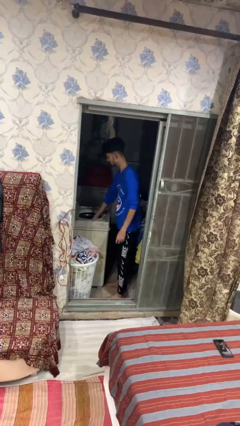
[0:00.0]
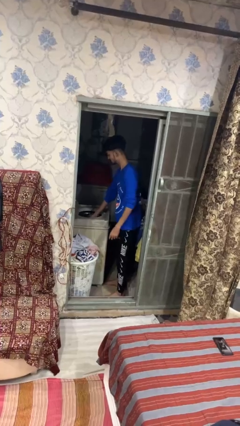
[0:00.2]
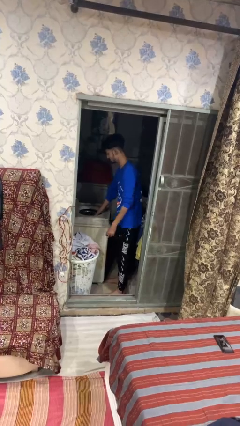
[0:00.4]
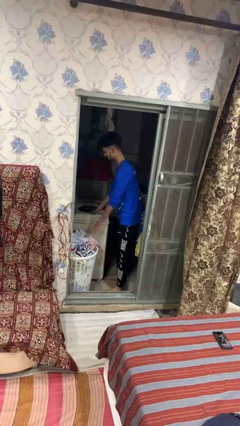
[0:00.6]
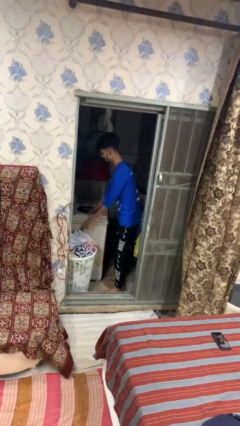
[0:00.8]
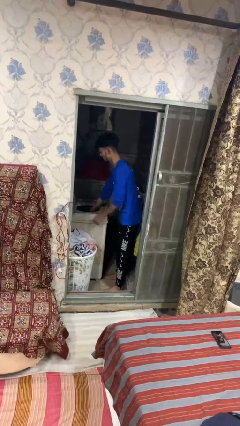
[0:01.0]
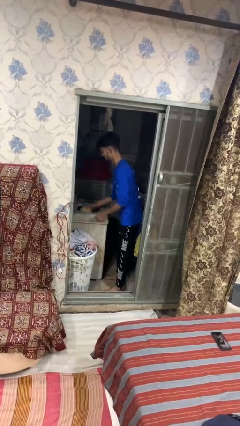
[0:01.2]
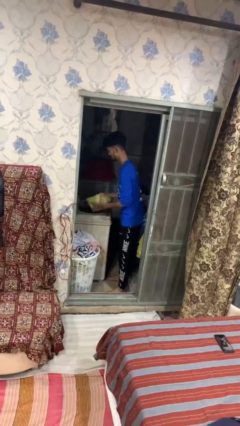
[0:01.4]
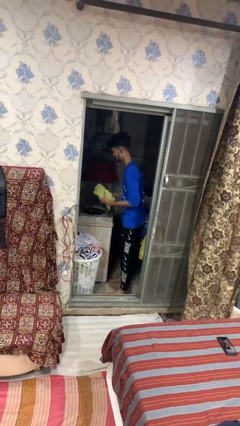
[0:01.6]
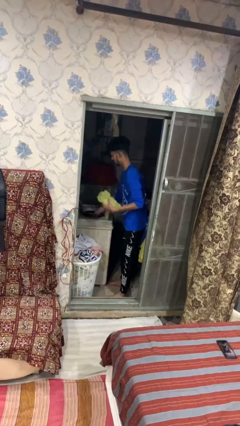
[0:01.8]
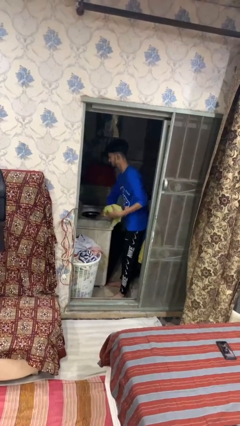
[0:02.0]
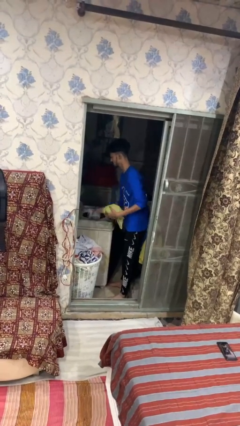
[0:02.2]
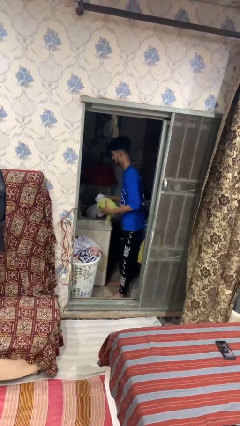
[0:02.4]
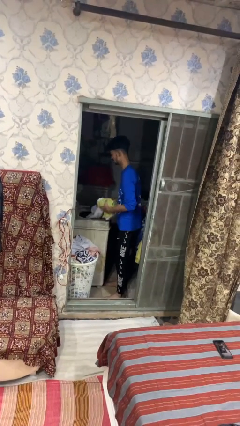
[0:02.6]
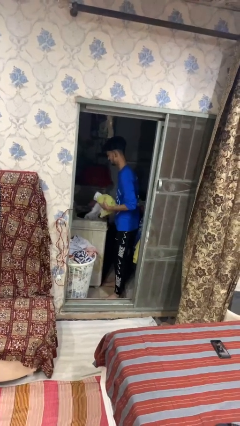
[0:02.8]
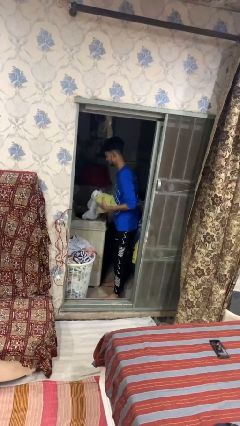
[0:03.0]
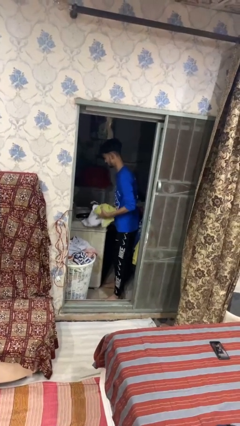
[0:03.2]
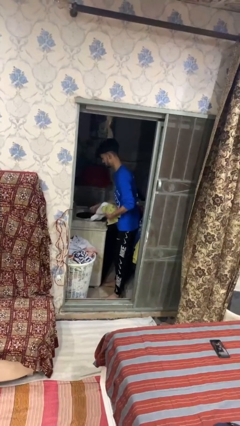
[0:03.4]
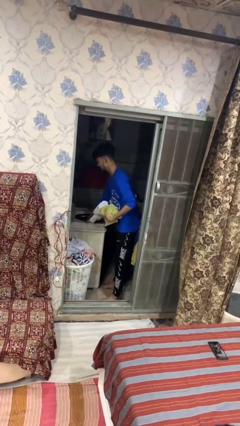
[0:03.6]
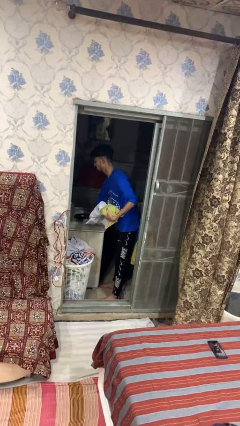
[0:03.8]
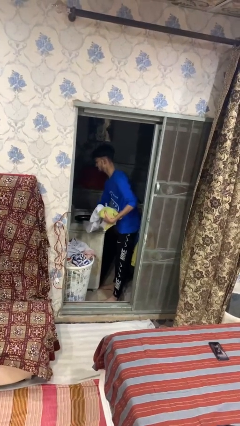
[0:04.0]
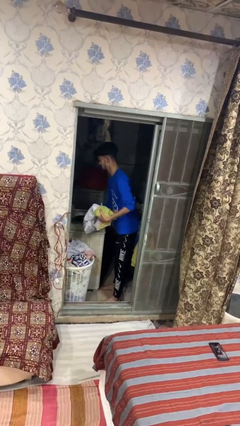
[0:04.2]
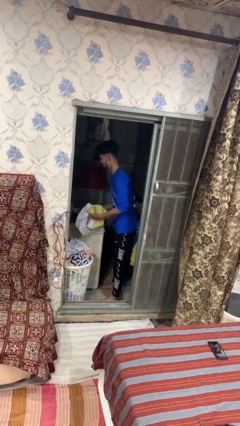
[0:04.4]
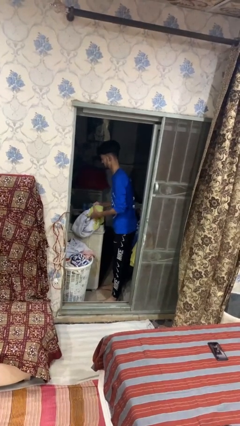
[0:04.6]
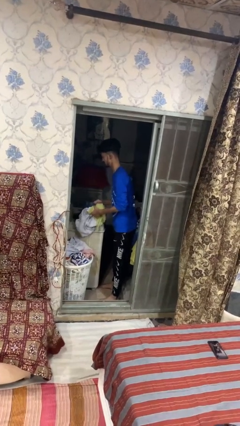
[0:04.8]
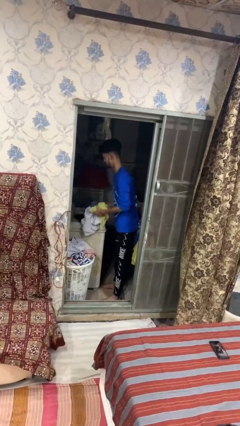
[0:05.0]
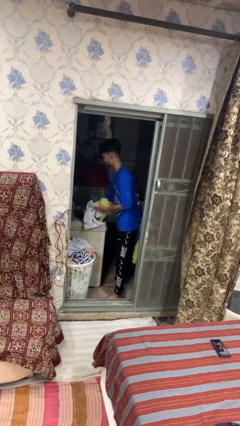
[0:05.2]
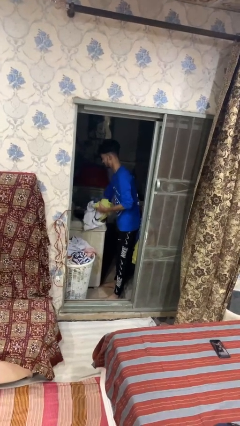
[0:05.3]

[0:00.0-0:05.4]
person unloads dryer

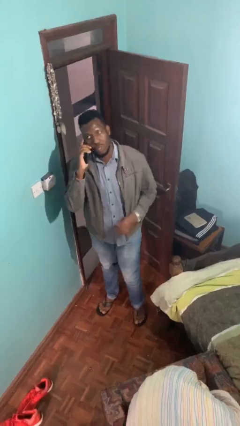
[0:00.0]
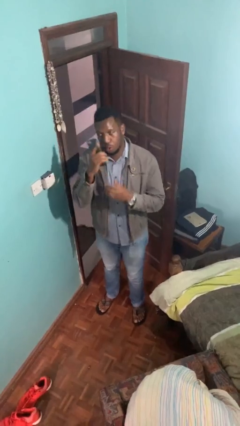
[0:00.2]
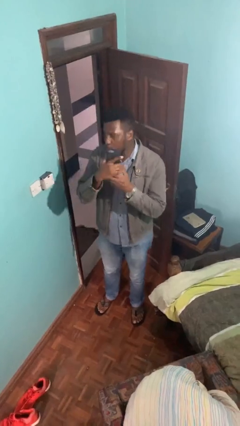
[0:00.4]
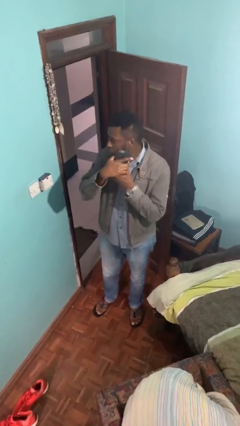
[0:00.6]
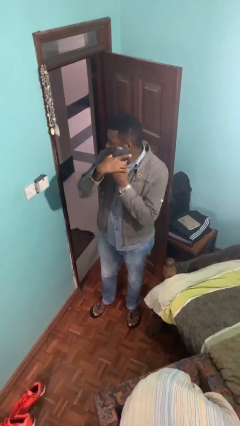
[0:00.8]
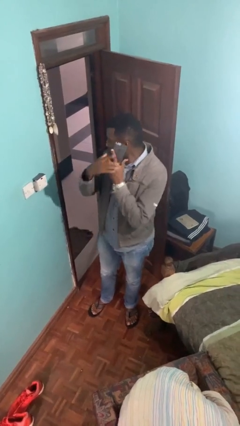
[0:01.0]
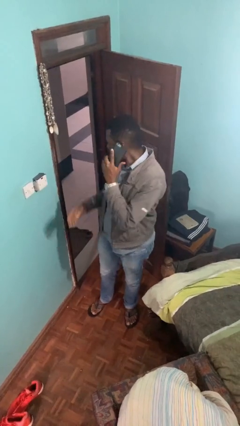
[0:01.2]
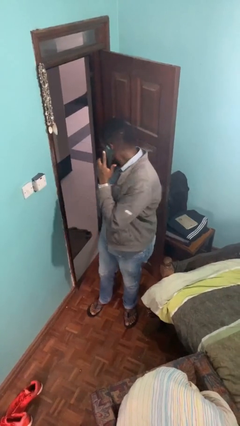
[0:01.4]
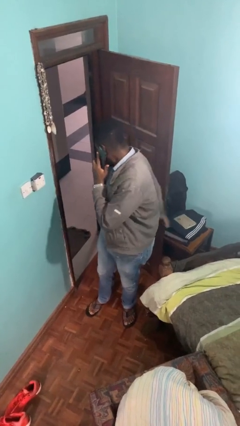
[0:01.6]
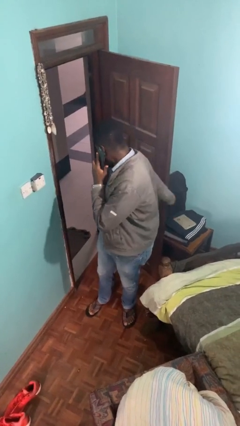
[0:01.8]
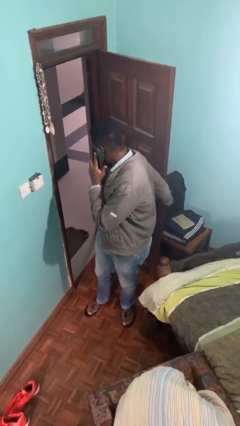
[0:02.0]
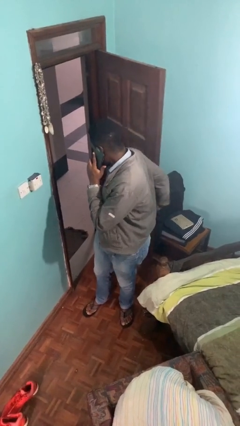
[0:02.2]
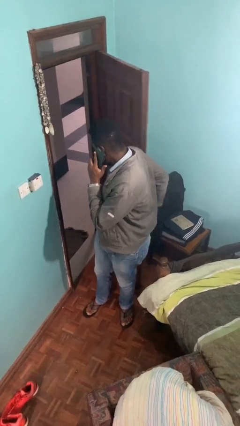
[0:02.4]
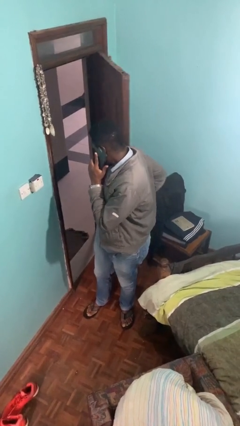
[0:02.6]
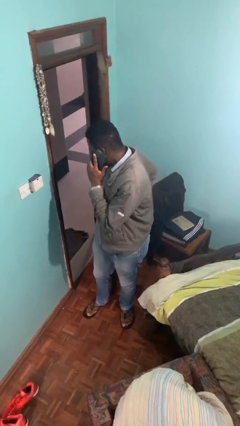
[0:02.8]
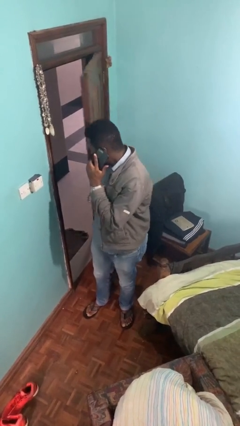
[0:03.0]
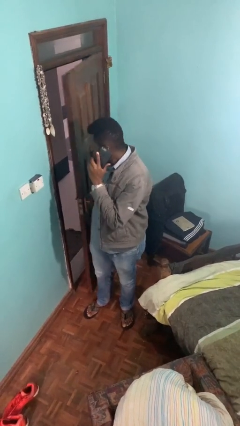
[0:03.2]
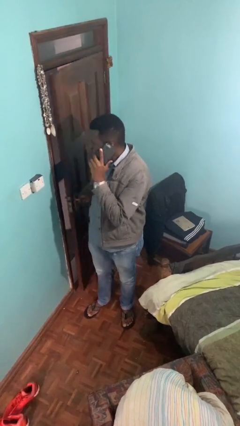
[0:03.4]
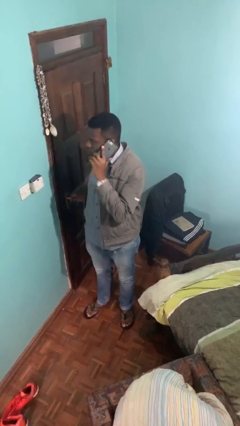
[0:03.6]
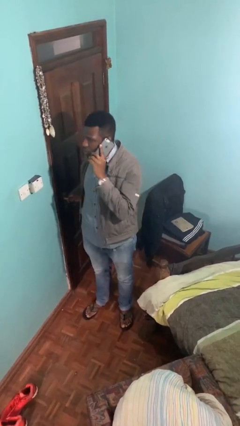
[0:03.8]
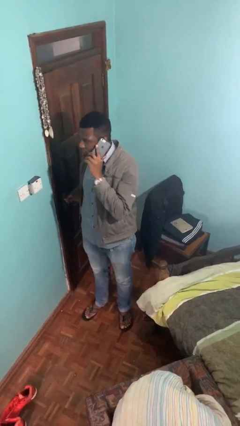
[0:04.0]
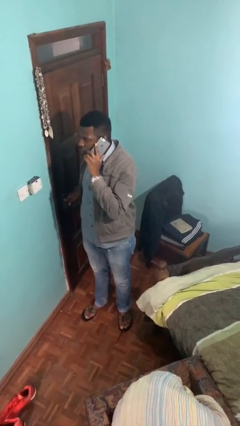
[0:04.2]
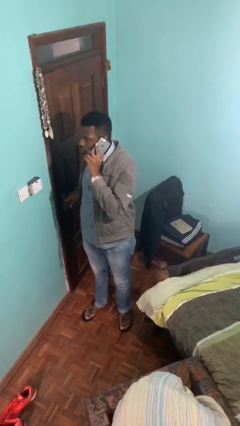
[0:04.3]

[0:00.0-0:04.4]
person closes facility door

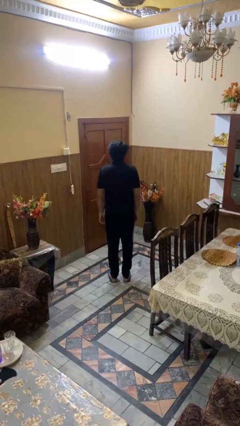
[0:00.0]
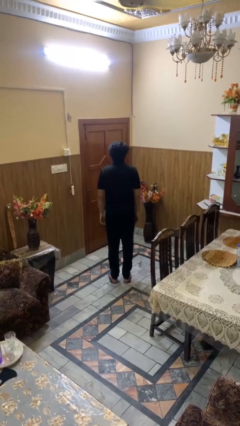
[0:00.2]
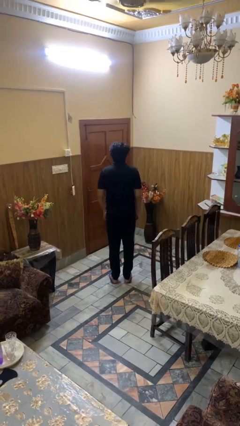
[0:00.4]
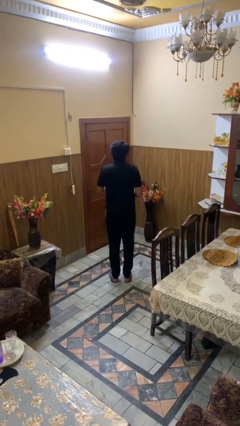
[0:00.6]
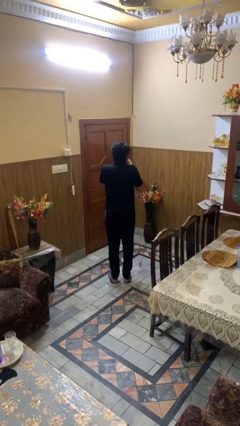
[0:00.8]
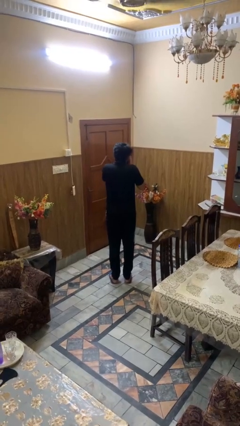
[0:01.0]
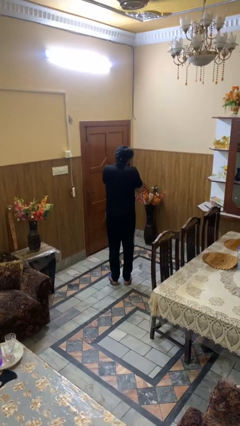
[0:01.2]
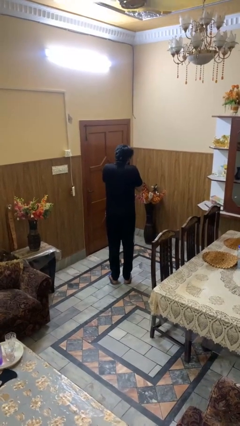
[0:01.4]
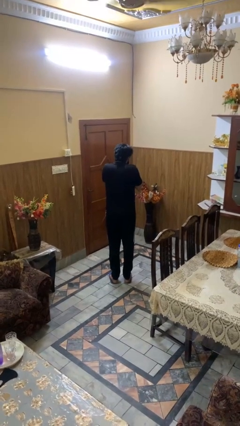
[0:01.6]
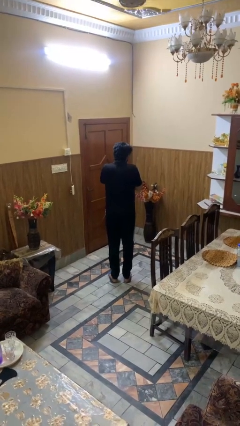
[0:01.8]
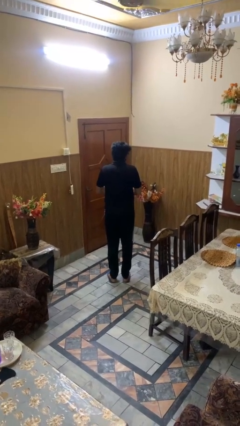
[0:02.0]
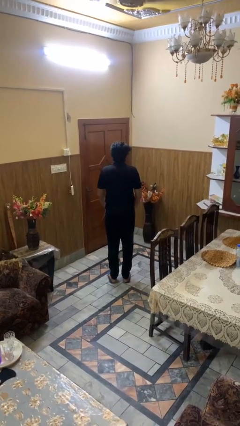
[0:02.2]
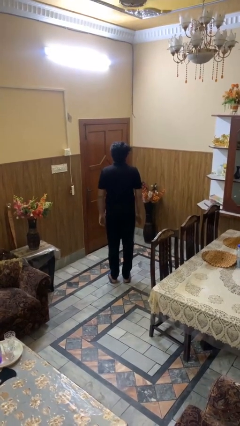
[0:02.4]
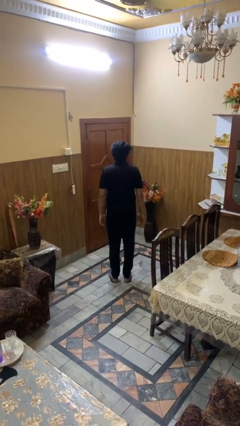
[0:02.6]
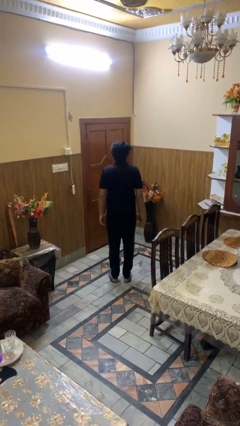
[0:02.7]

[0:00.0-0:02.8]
person sneezes into hand

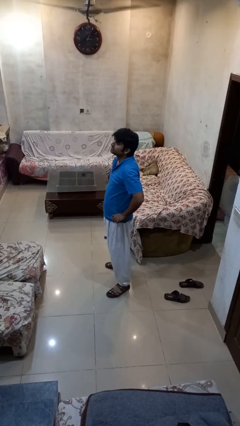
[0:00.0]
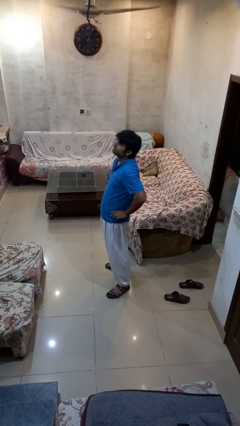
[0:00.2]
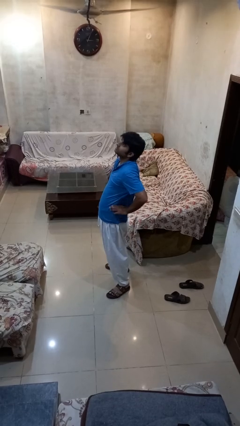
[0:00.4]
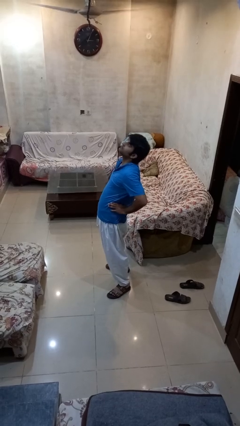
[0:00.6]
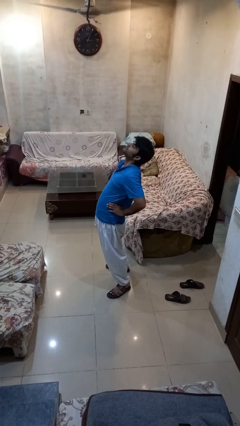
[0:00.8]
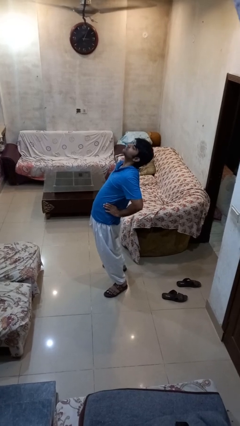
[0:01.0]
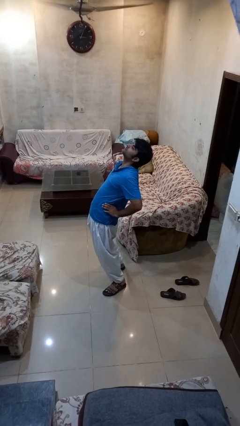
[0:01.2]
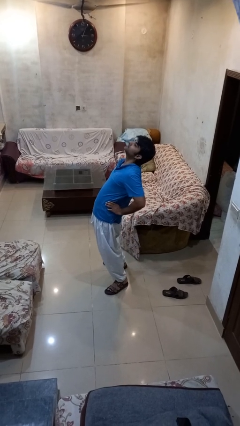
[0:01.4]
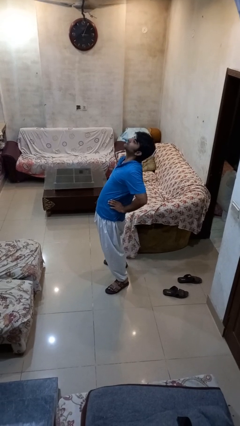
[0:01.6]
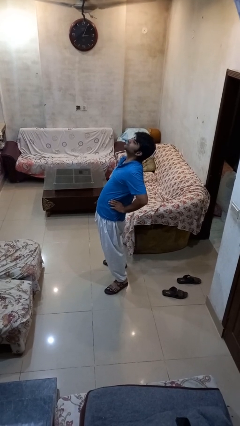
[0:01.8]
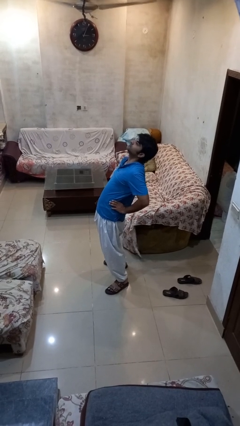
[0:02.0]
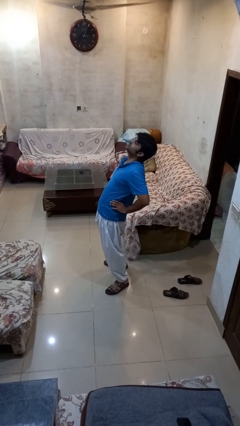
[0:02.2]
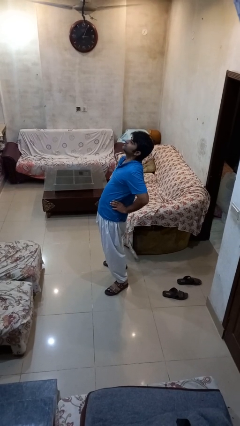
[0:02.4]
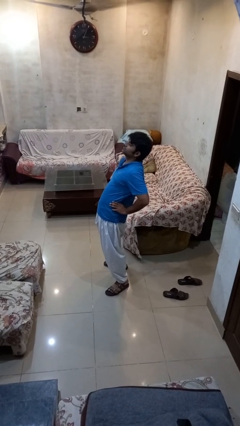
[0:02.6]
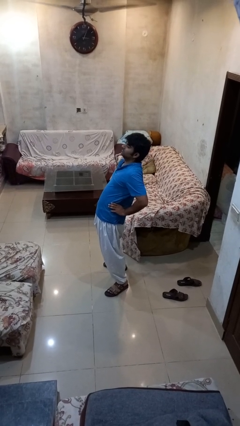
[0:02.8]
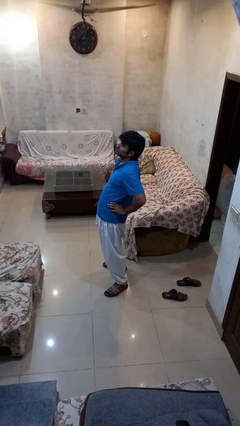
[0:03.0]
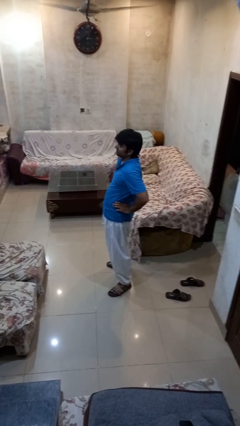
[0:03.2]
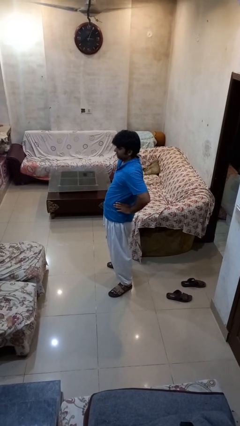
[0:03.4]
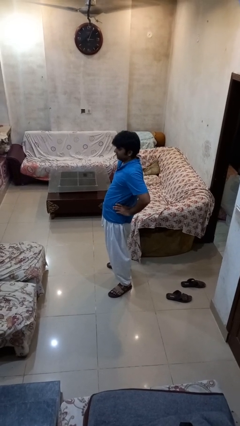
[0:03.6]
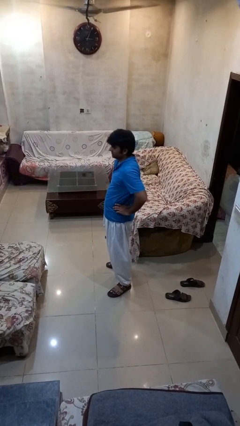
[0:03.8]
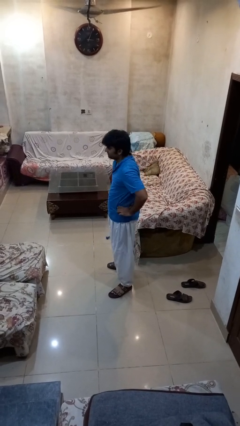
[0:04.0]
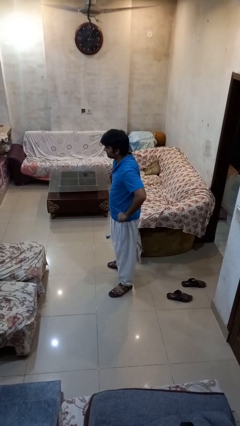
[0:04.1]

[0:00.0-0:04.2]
person stretches back

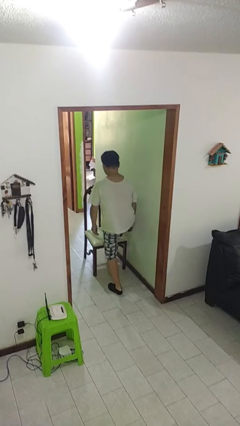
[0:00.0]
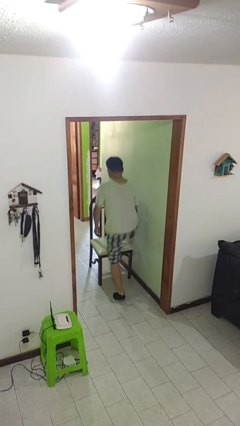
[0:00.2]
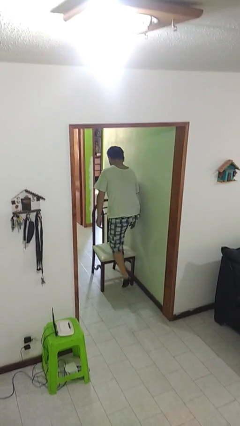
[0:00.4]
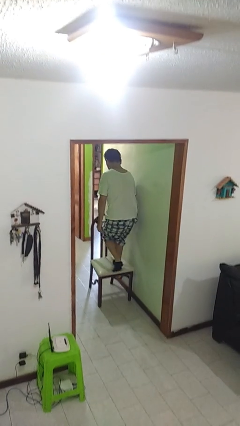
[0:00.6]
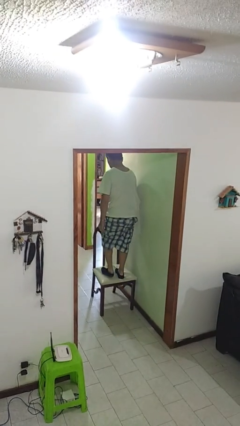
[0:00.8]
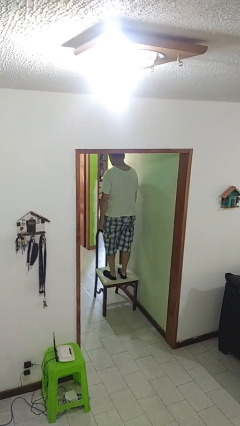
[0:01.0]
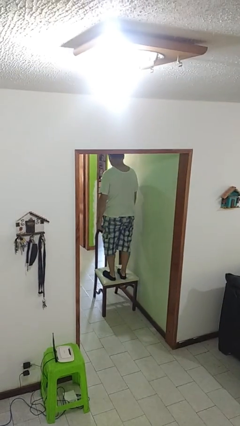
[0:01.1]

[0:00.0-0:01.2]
person climbs on chair
